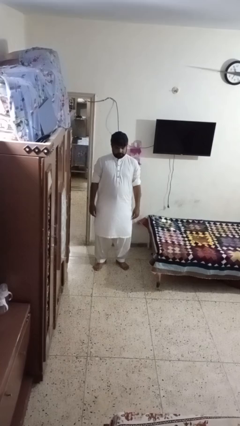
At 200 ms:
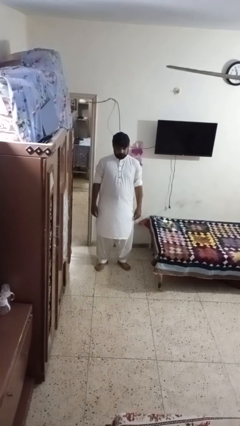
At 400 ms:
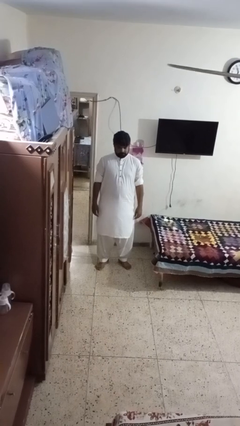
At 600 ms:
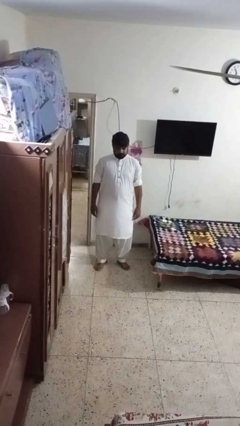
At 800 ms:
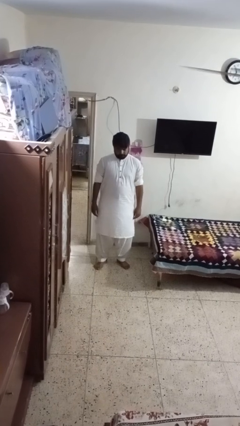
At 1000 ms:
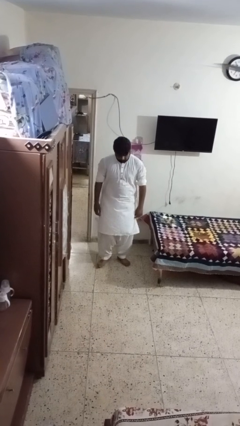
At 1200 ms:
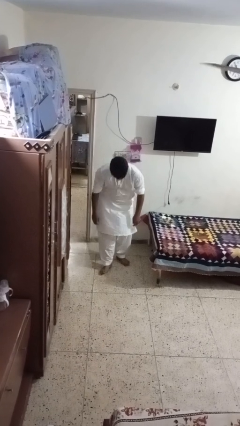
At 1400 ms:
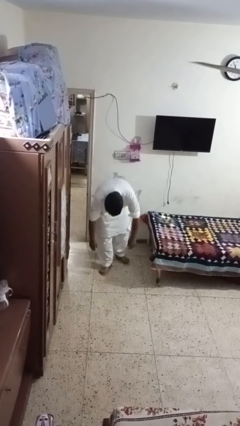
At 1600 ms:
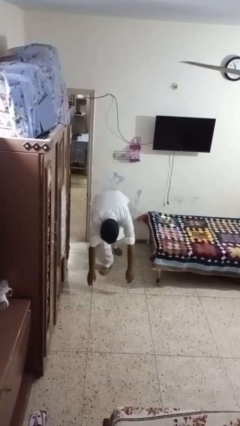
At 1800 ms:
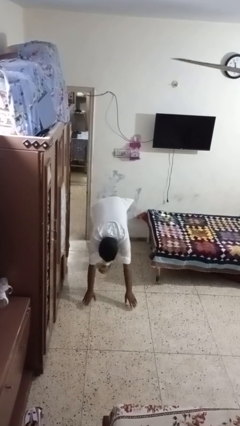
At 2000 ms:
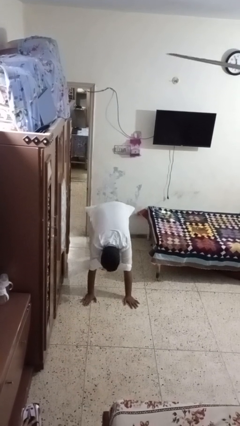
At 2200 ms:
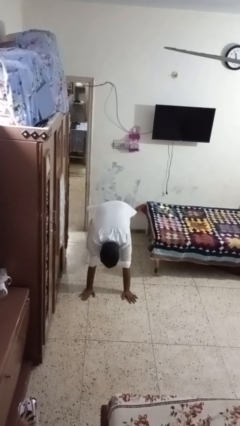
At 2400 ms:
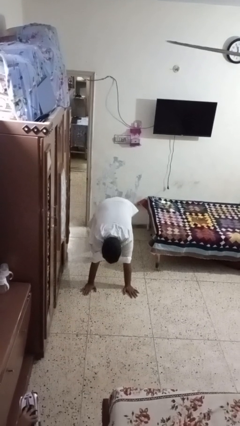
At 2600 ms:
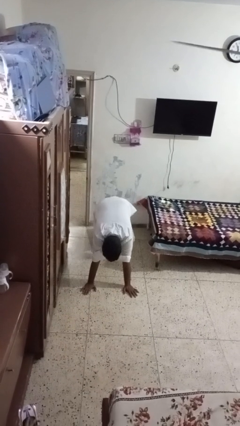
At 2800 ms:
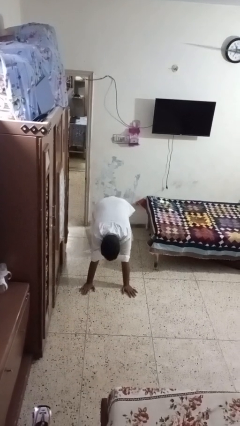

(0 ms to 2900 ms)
person exercises with plank

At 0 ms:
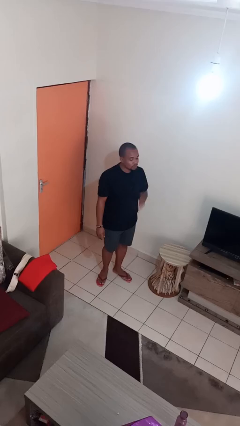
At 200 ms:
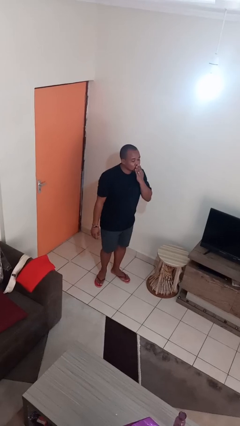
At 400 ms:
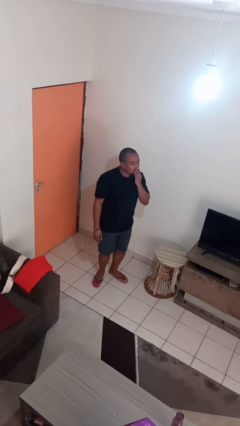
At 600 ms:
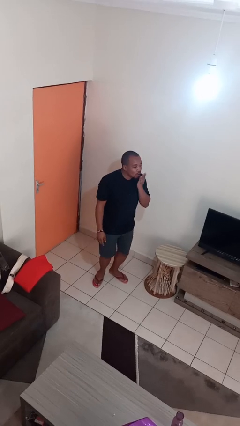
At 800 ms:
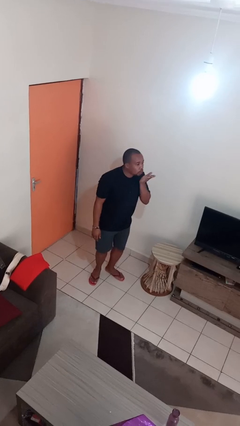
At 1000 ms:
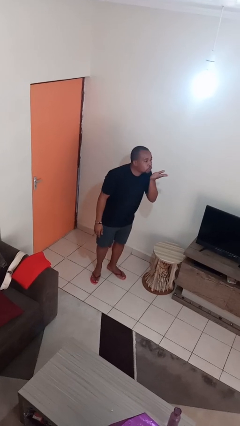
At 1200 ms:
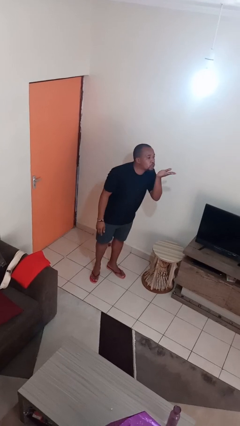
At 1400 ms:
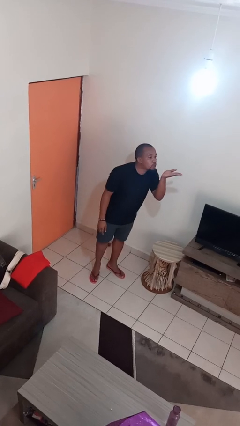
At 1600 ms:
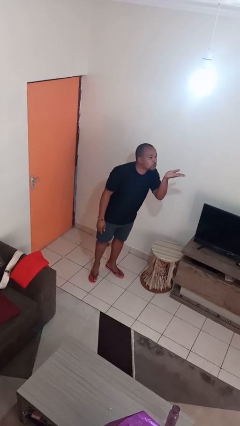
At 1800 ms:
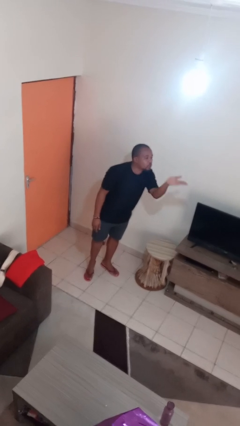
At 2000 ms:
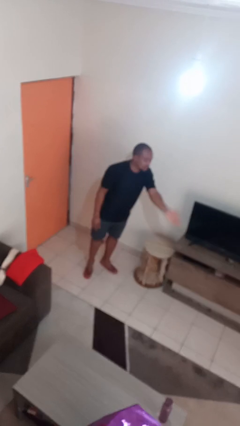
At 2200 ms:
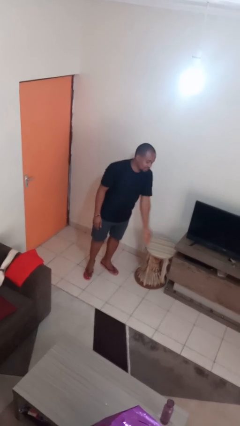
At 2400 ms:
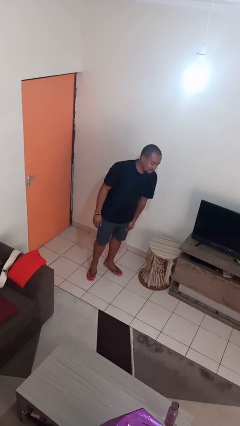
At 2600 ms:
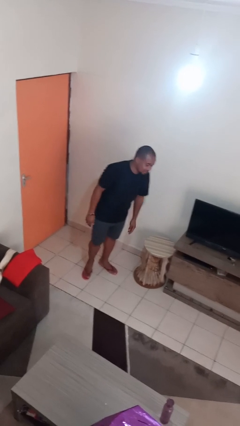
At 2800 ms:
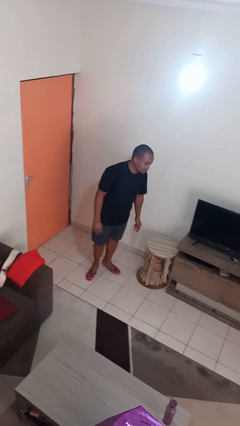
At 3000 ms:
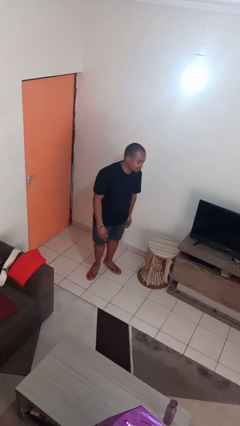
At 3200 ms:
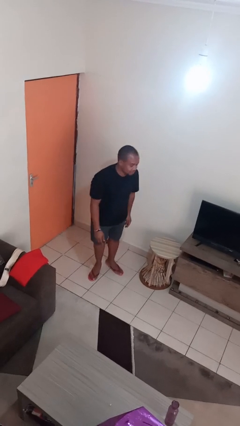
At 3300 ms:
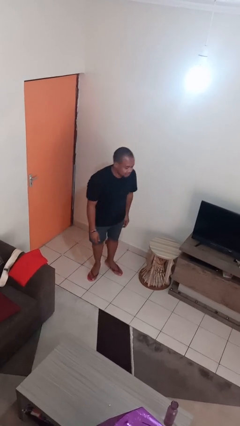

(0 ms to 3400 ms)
person gestures blow kiss

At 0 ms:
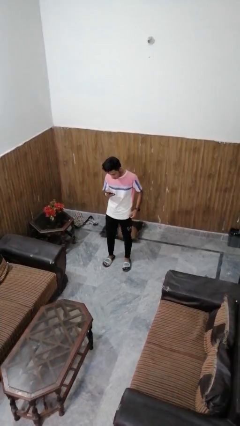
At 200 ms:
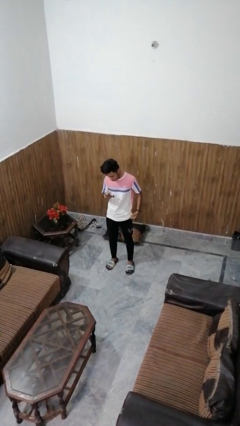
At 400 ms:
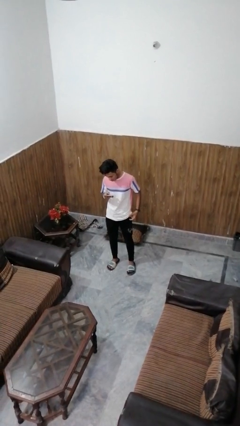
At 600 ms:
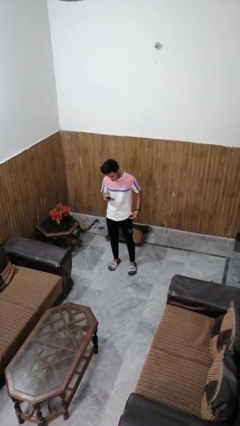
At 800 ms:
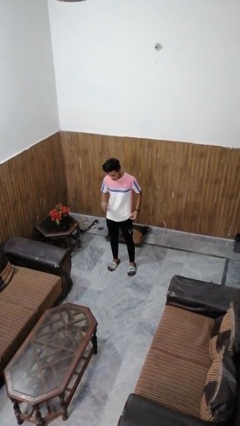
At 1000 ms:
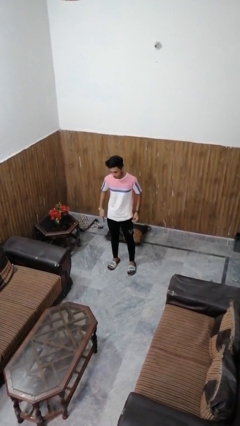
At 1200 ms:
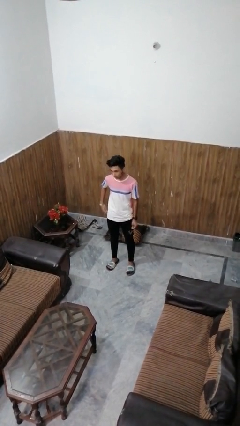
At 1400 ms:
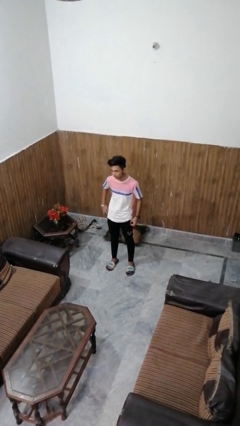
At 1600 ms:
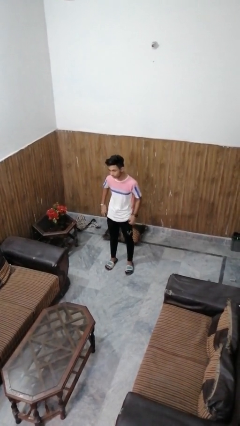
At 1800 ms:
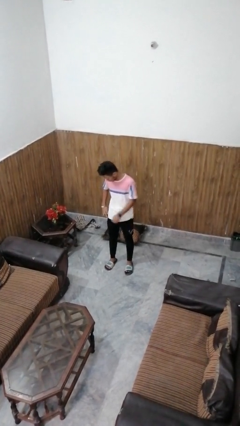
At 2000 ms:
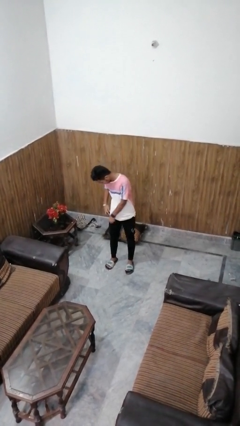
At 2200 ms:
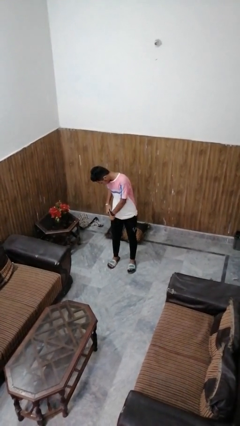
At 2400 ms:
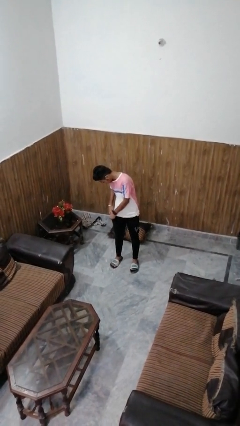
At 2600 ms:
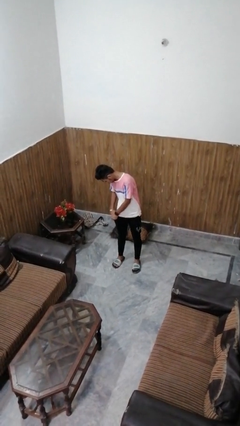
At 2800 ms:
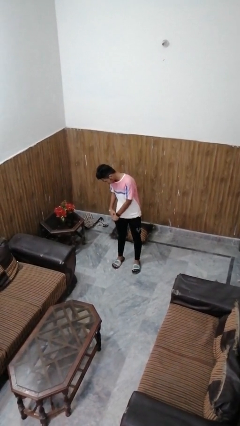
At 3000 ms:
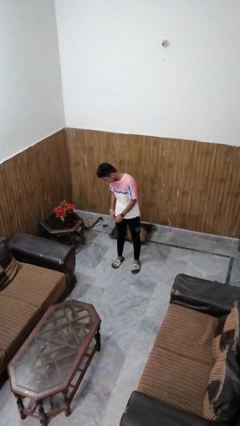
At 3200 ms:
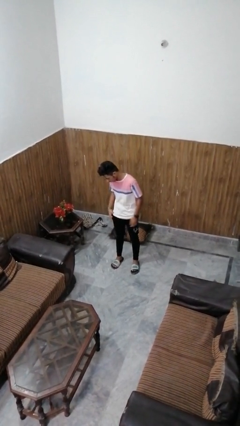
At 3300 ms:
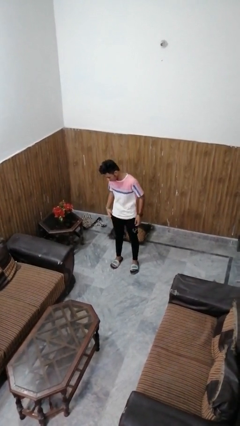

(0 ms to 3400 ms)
person puts phone into pocket

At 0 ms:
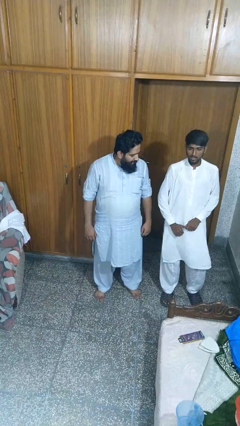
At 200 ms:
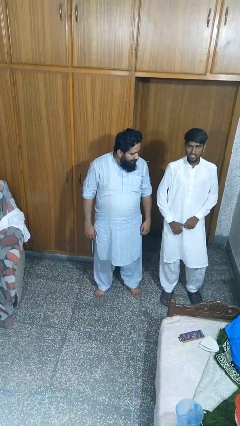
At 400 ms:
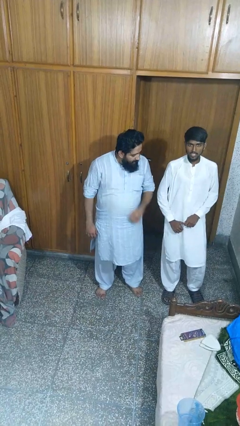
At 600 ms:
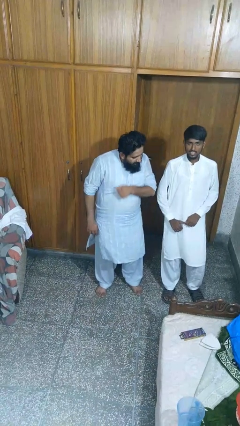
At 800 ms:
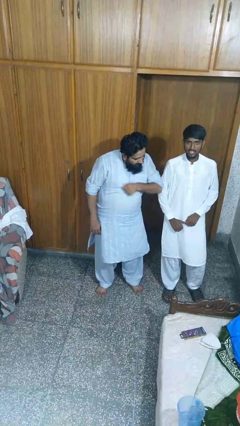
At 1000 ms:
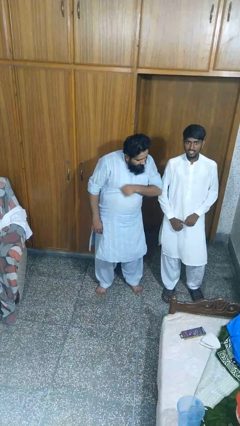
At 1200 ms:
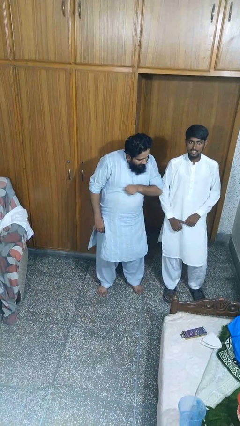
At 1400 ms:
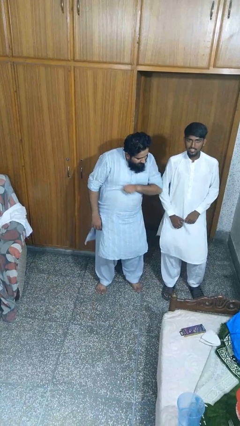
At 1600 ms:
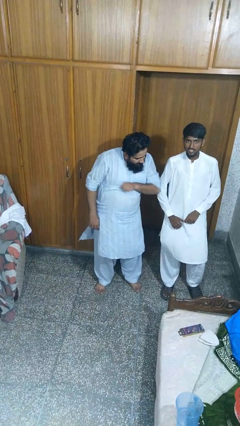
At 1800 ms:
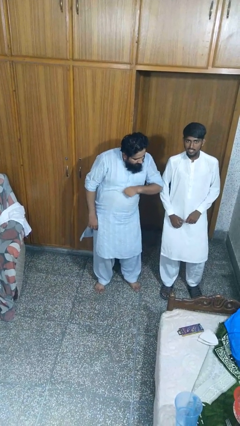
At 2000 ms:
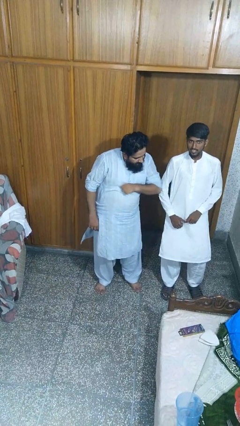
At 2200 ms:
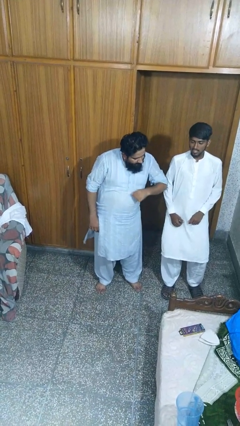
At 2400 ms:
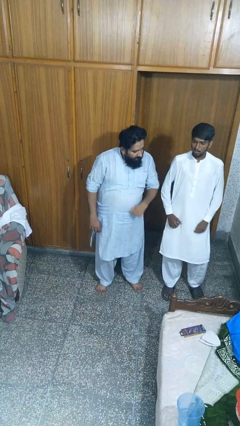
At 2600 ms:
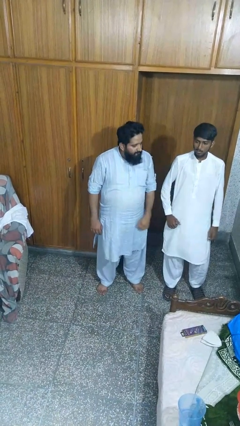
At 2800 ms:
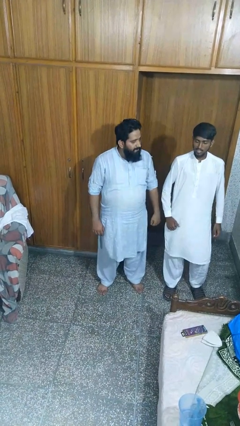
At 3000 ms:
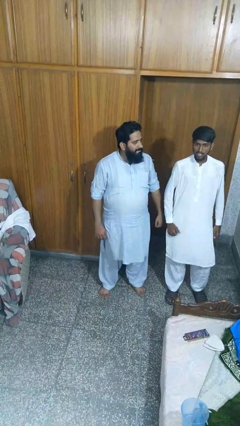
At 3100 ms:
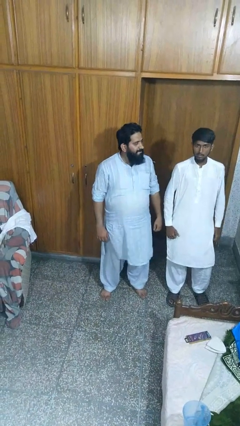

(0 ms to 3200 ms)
person nudges person with elbow

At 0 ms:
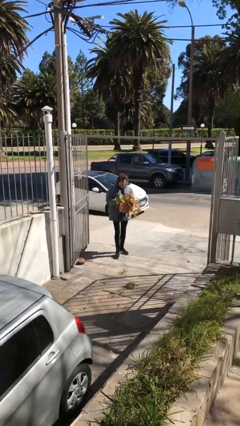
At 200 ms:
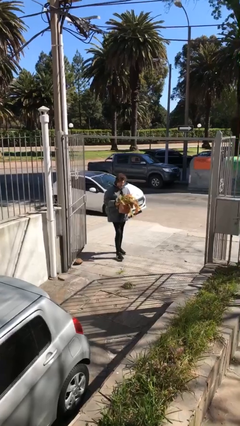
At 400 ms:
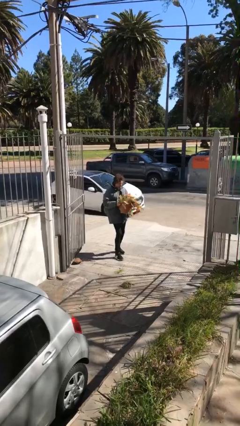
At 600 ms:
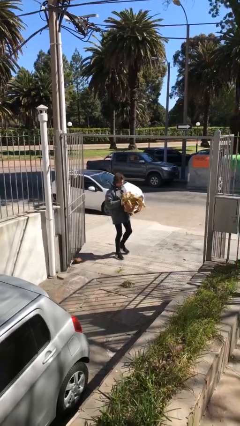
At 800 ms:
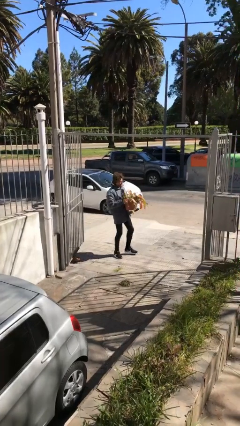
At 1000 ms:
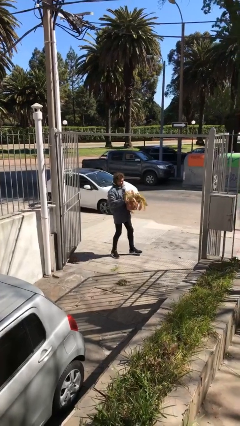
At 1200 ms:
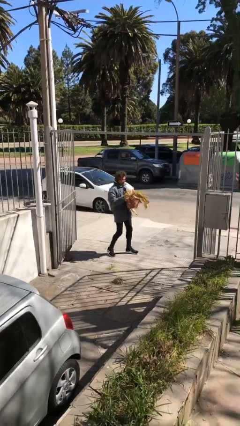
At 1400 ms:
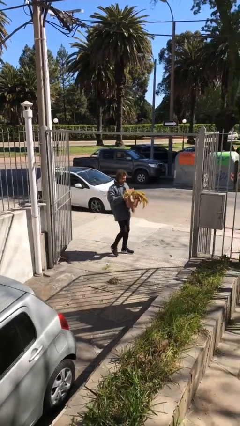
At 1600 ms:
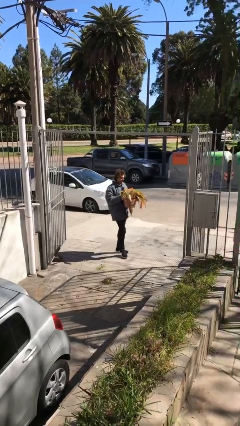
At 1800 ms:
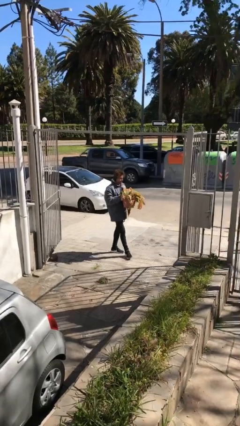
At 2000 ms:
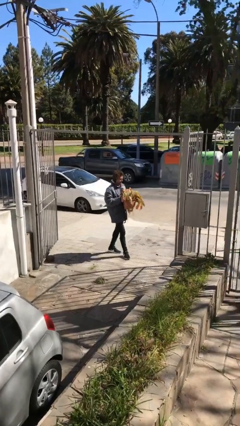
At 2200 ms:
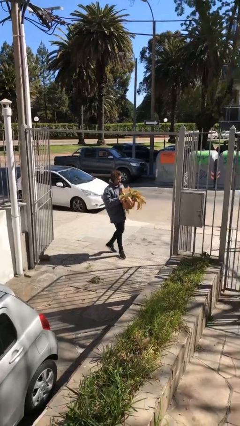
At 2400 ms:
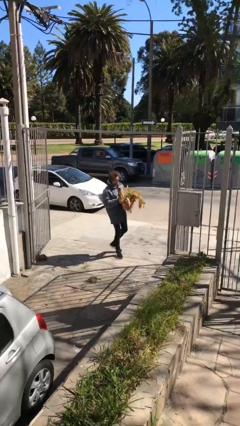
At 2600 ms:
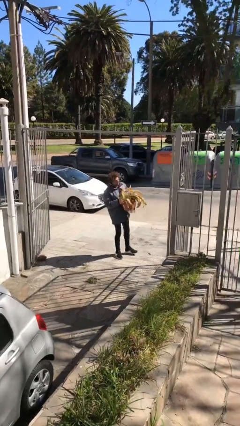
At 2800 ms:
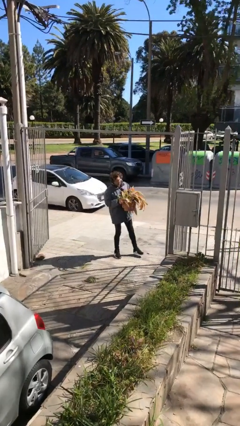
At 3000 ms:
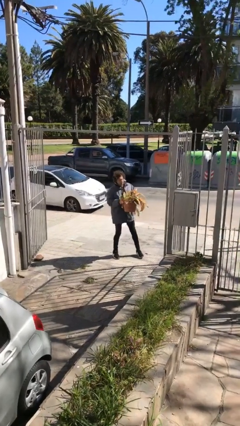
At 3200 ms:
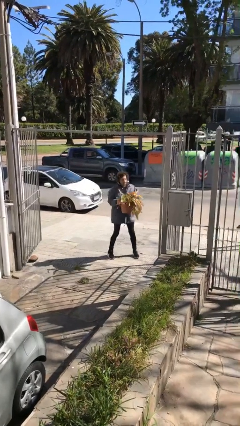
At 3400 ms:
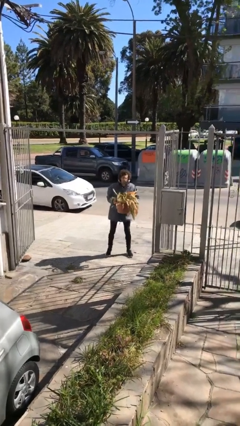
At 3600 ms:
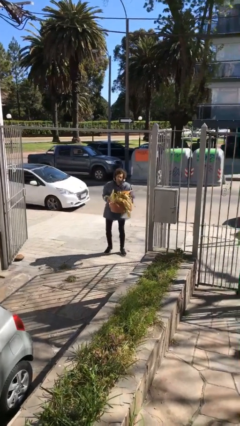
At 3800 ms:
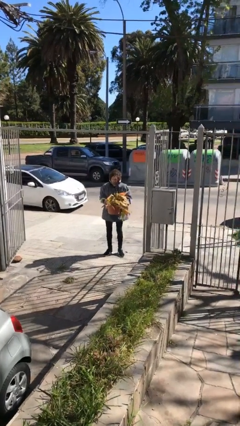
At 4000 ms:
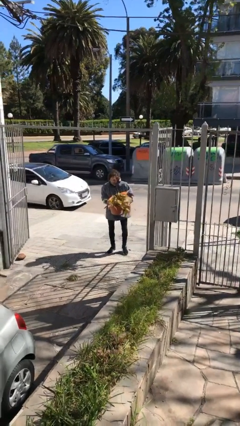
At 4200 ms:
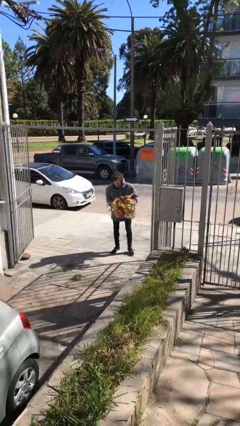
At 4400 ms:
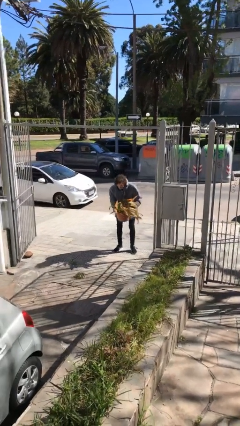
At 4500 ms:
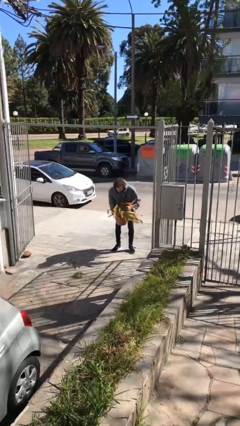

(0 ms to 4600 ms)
person carries heavy object
